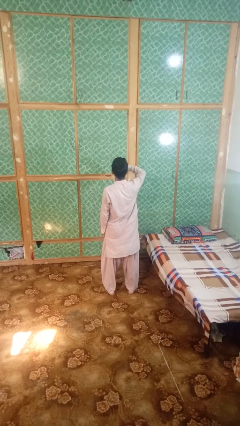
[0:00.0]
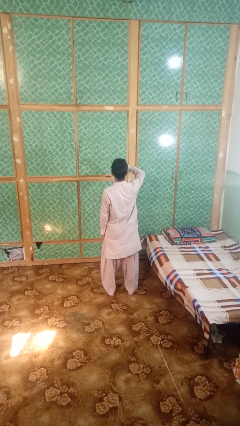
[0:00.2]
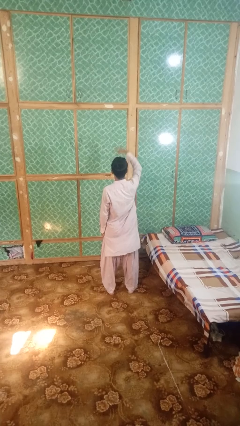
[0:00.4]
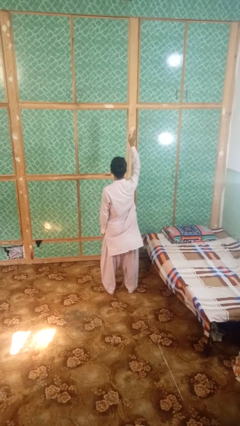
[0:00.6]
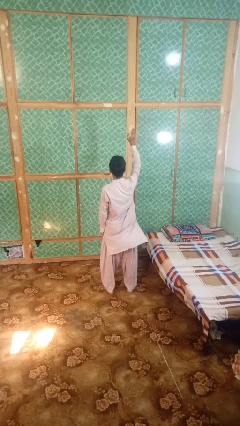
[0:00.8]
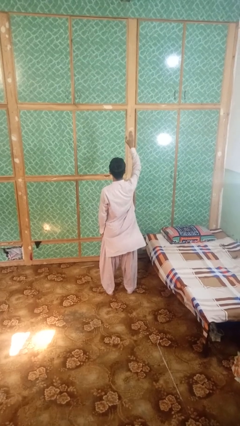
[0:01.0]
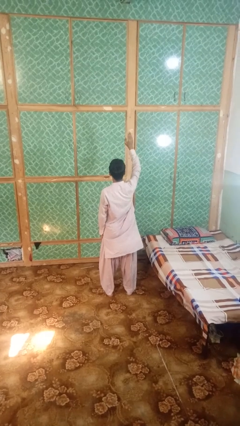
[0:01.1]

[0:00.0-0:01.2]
person gestures swipe up

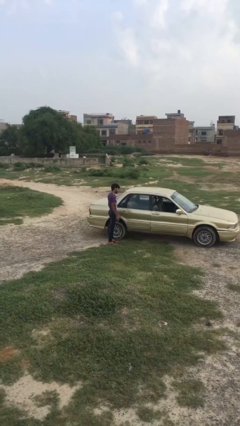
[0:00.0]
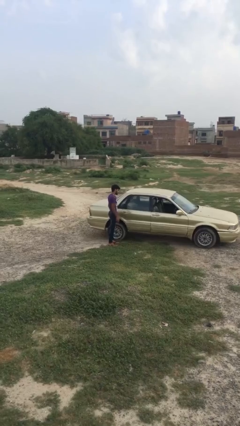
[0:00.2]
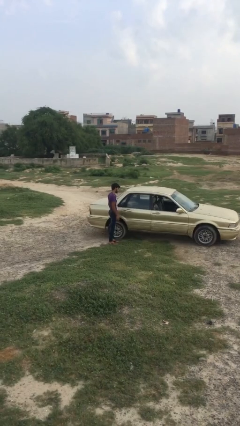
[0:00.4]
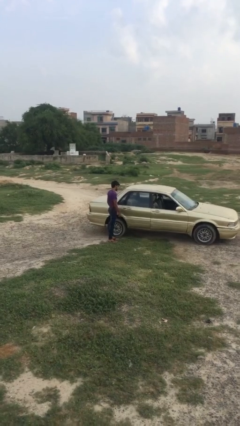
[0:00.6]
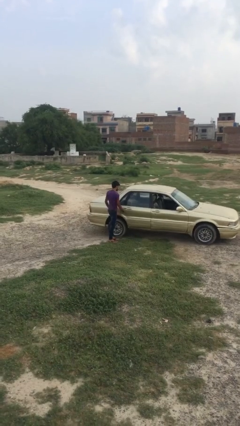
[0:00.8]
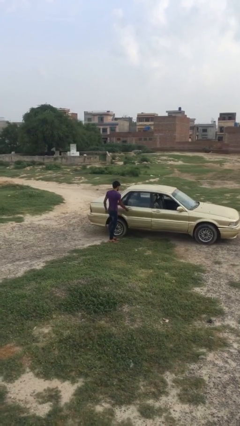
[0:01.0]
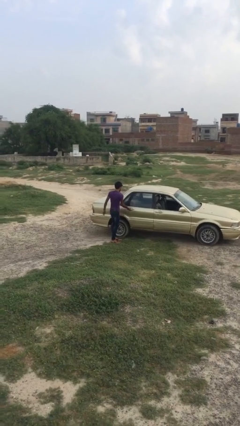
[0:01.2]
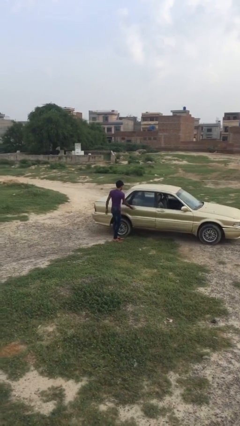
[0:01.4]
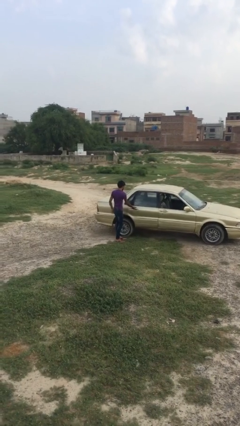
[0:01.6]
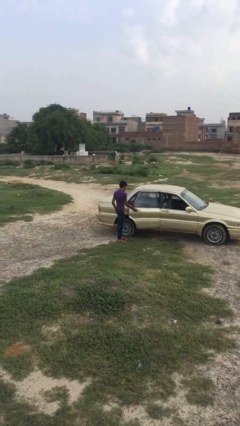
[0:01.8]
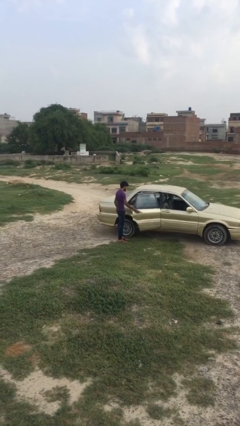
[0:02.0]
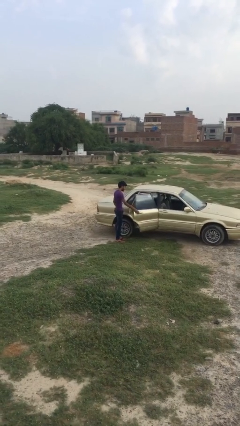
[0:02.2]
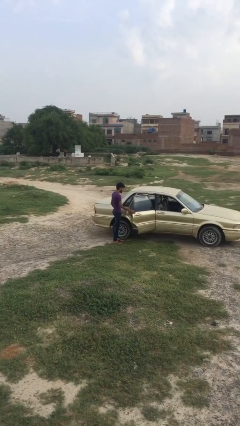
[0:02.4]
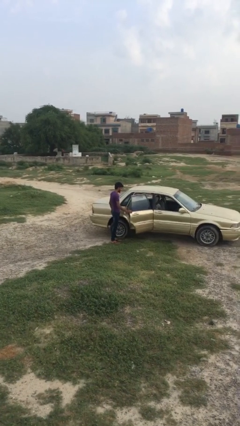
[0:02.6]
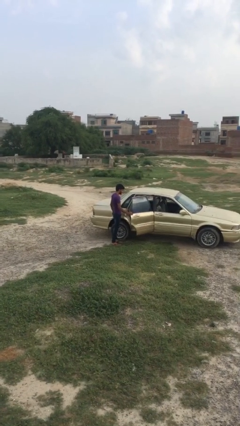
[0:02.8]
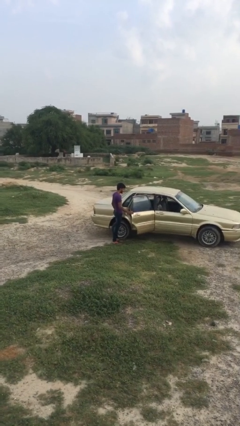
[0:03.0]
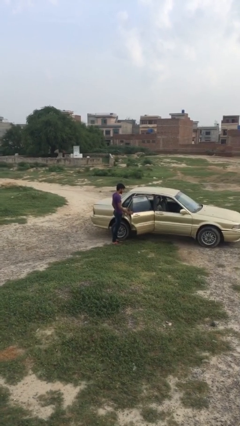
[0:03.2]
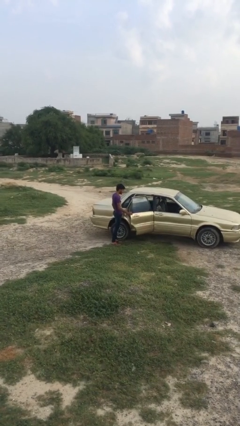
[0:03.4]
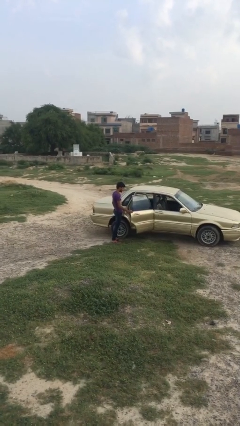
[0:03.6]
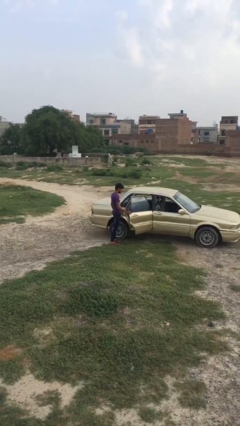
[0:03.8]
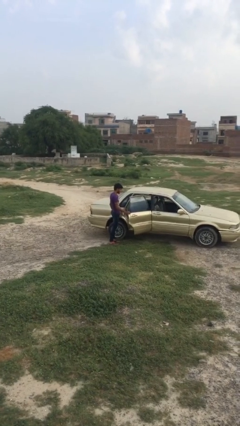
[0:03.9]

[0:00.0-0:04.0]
person opens car door

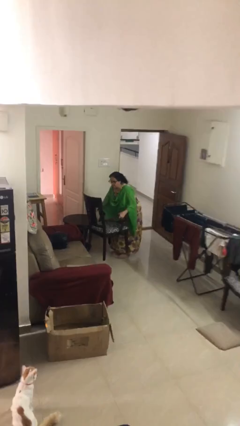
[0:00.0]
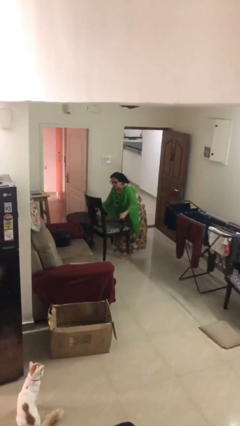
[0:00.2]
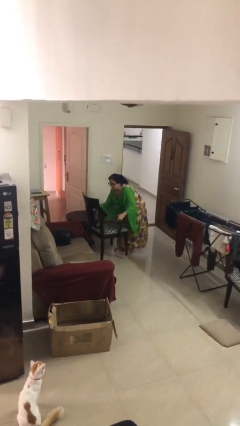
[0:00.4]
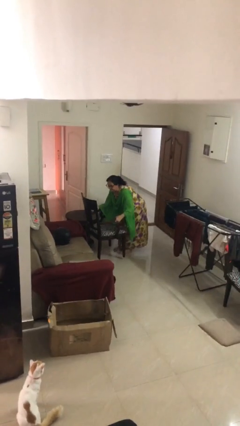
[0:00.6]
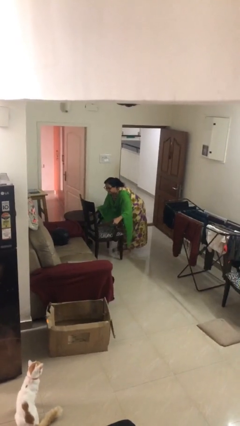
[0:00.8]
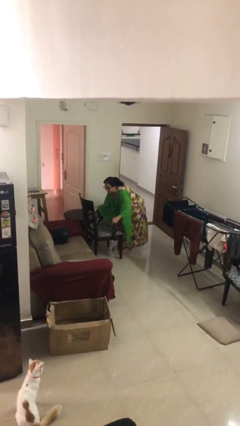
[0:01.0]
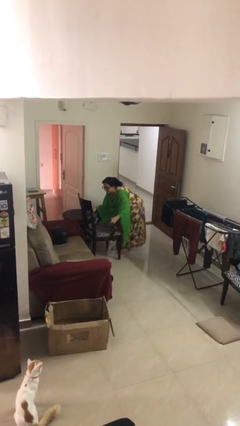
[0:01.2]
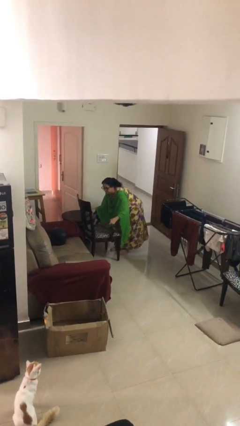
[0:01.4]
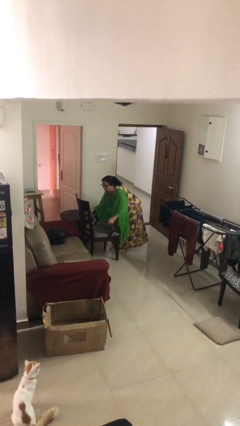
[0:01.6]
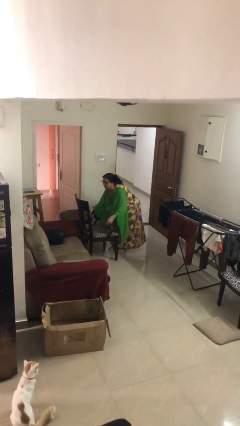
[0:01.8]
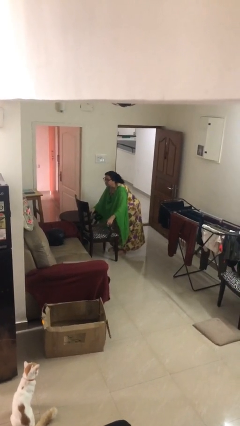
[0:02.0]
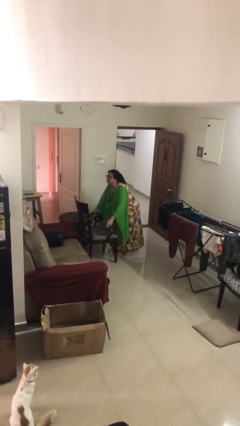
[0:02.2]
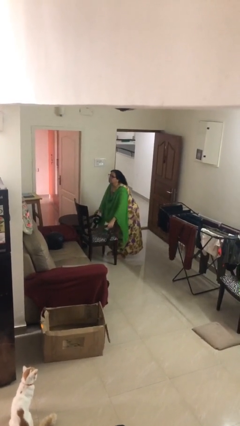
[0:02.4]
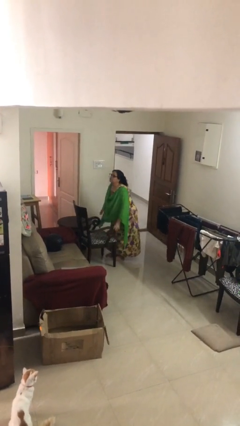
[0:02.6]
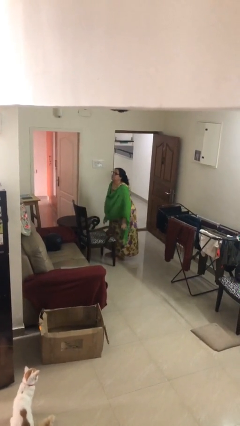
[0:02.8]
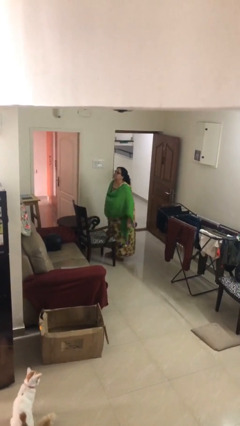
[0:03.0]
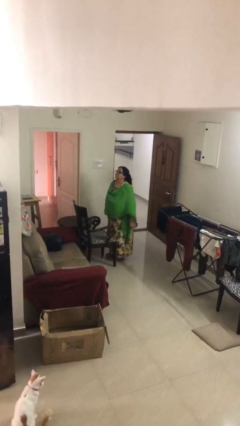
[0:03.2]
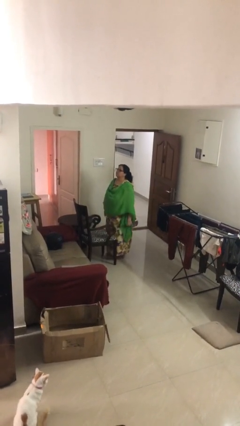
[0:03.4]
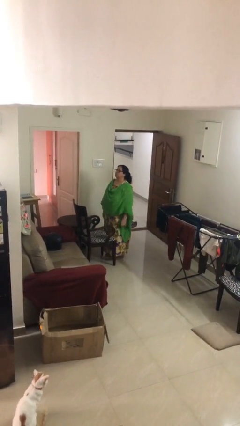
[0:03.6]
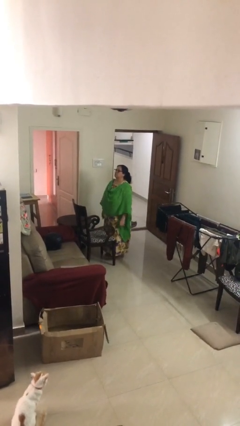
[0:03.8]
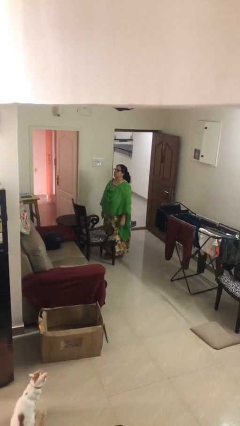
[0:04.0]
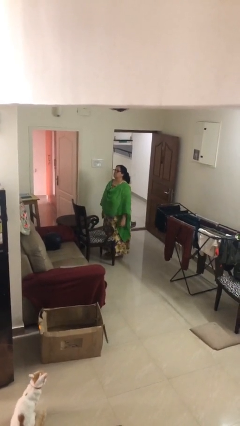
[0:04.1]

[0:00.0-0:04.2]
person puts down object on floor

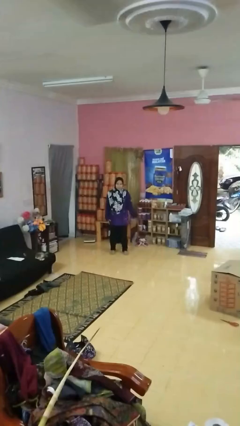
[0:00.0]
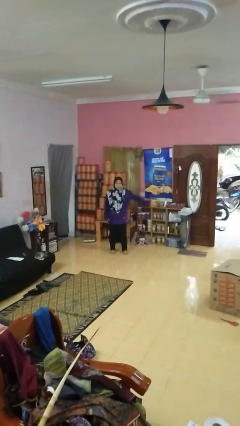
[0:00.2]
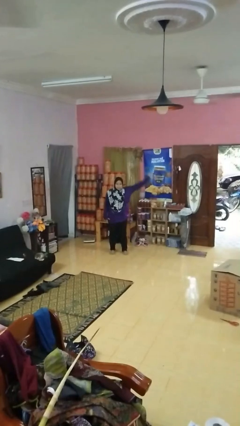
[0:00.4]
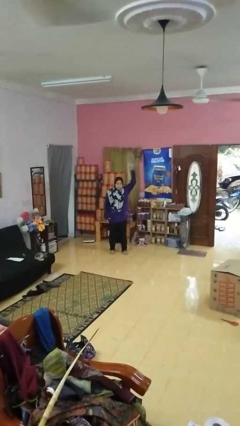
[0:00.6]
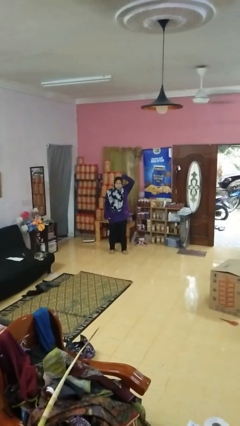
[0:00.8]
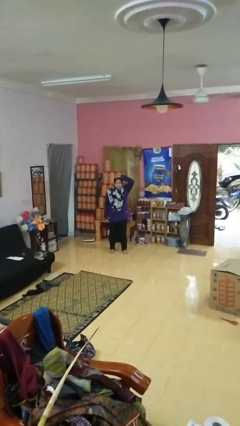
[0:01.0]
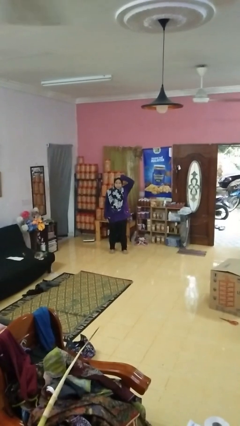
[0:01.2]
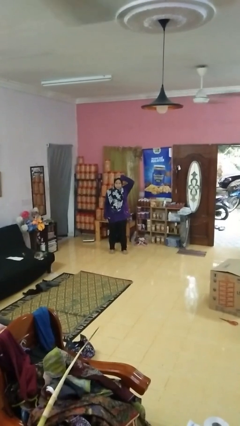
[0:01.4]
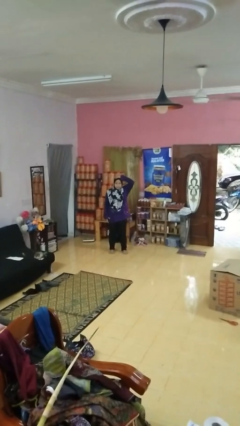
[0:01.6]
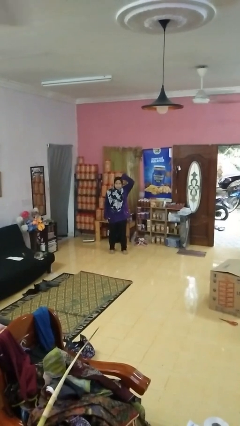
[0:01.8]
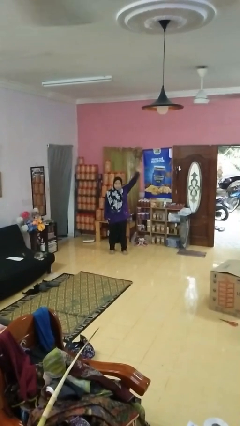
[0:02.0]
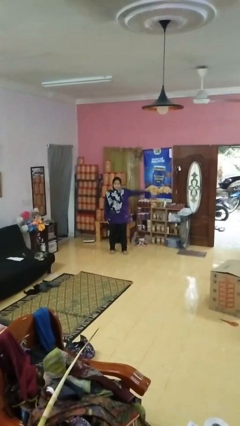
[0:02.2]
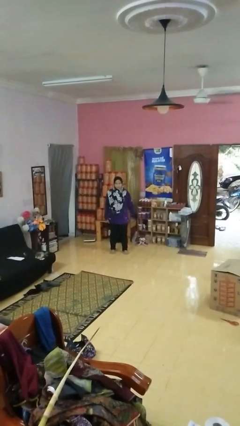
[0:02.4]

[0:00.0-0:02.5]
person pats head

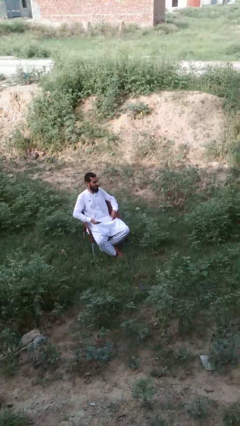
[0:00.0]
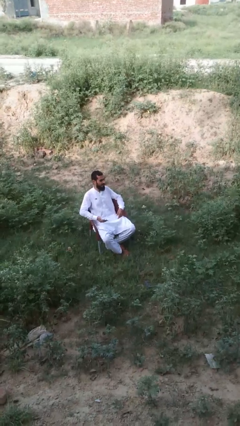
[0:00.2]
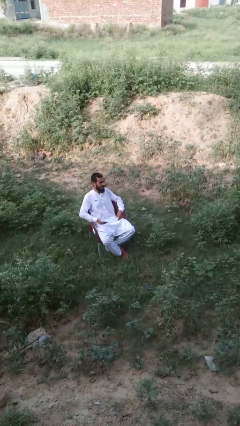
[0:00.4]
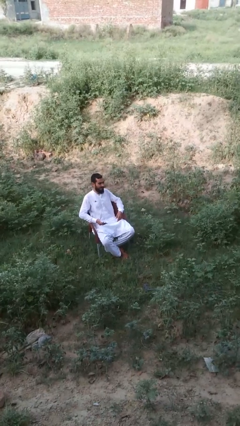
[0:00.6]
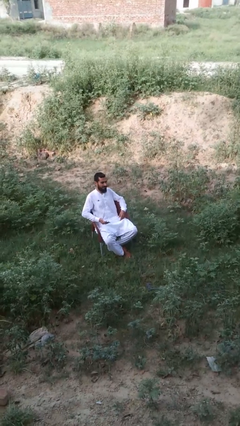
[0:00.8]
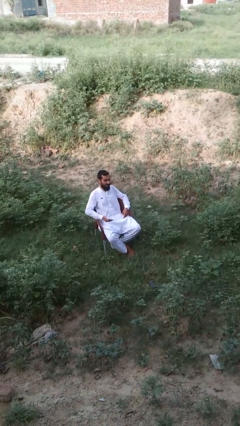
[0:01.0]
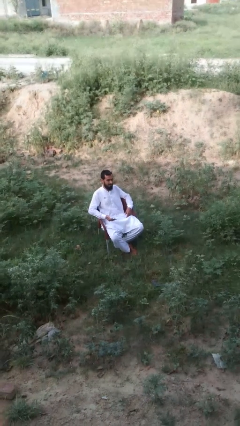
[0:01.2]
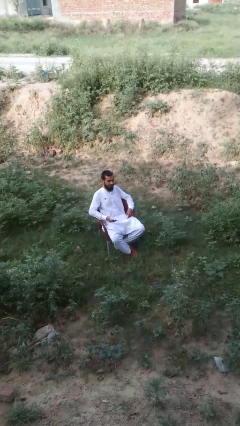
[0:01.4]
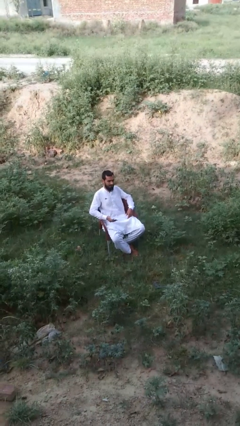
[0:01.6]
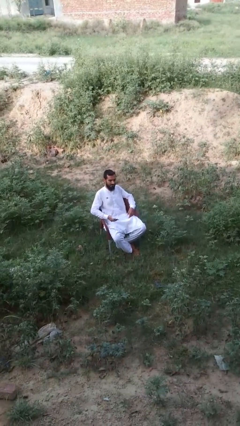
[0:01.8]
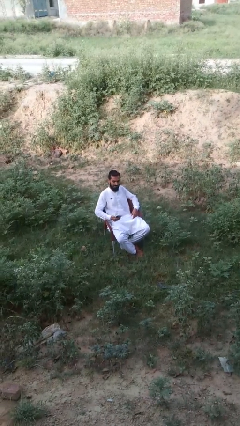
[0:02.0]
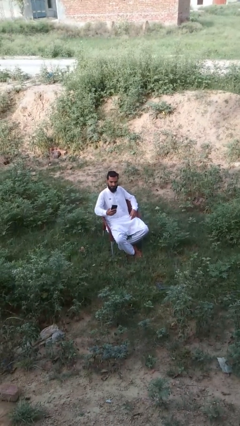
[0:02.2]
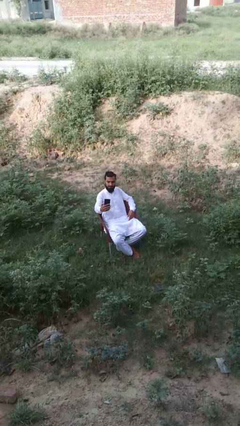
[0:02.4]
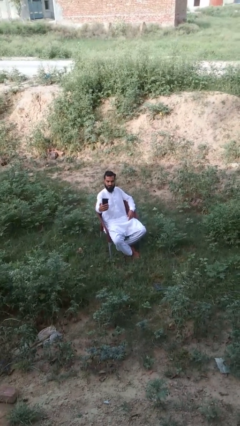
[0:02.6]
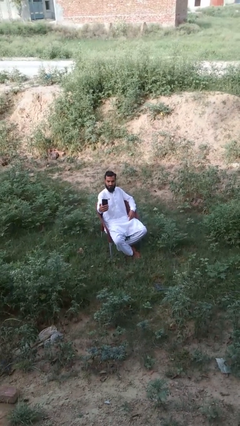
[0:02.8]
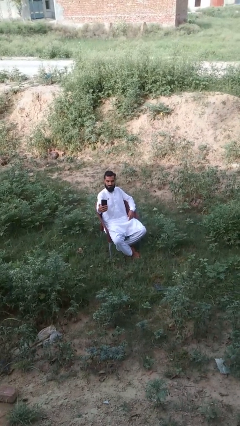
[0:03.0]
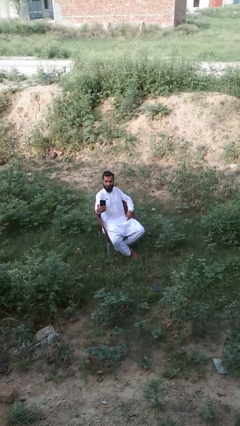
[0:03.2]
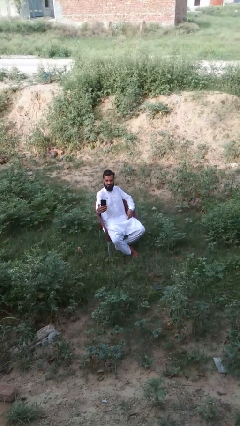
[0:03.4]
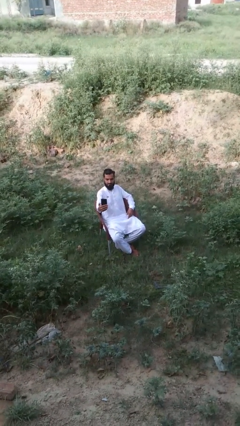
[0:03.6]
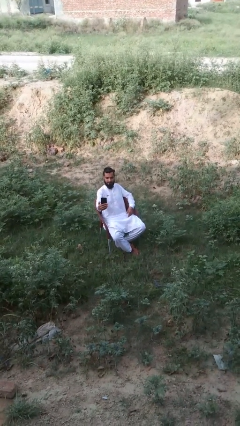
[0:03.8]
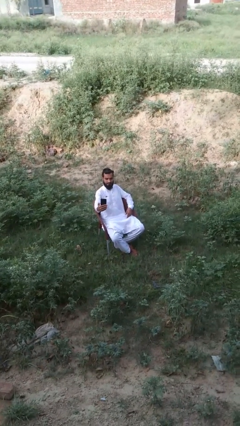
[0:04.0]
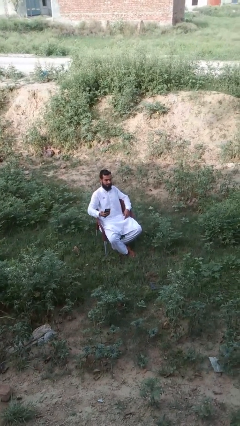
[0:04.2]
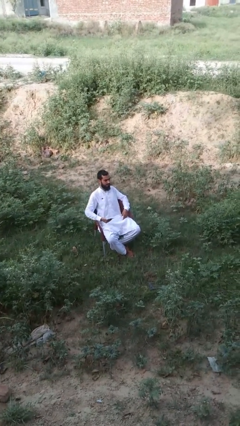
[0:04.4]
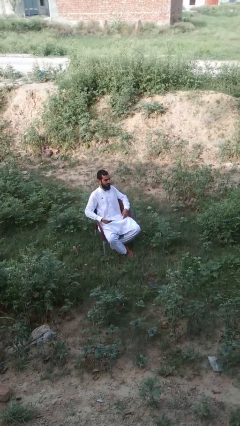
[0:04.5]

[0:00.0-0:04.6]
person takes selfie

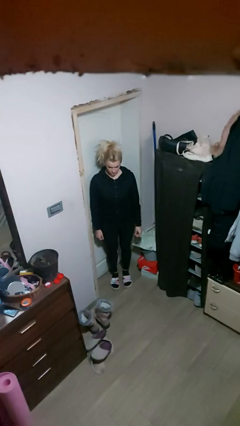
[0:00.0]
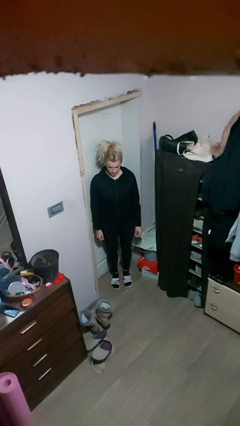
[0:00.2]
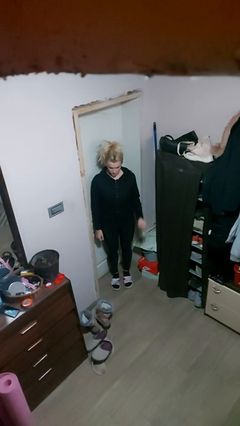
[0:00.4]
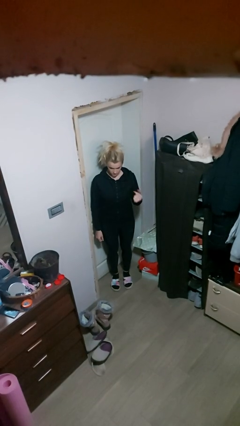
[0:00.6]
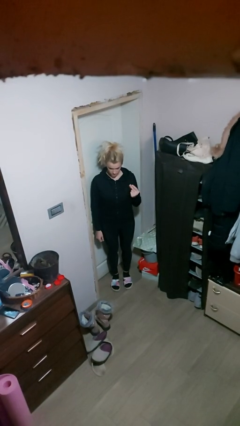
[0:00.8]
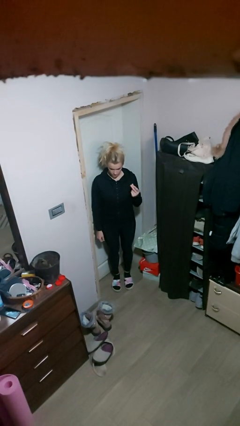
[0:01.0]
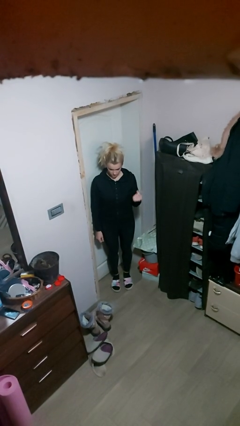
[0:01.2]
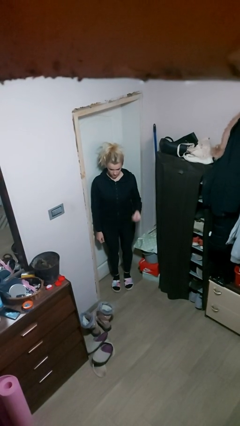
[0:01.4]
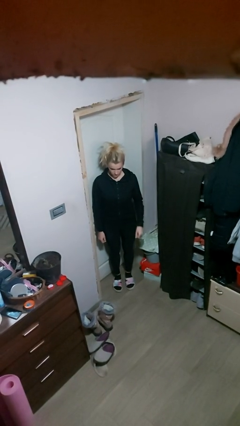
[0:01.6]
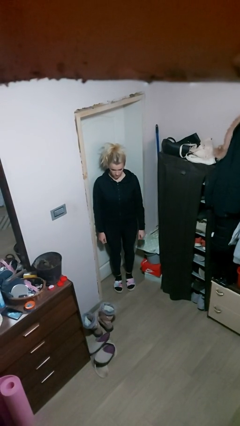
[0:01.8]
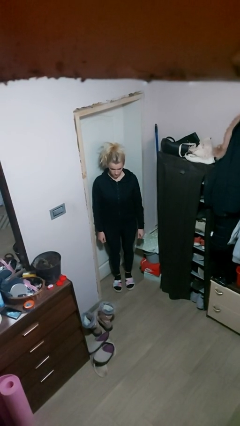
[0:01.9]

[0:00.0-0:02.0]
person snaps fingers
